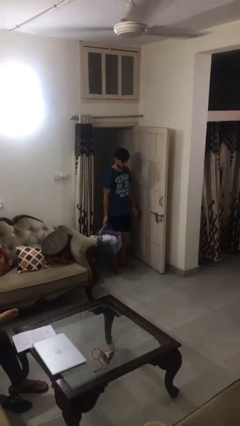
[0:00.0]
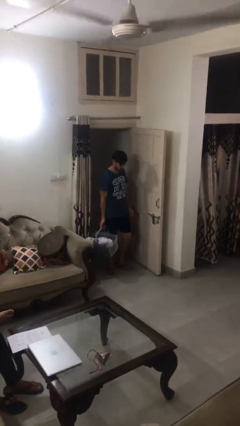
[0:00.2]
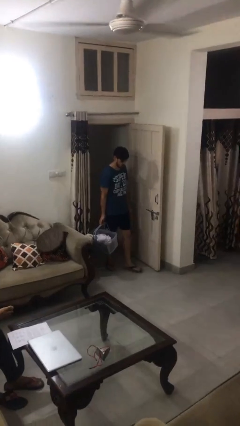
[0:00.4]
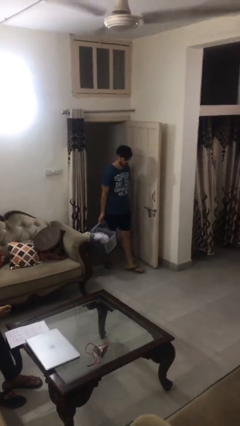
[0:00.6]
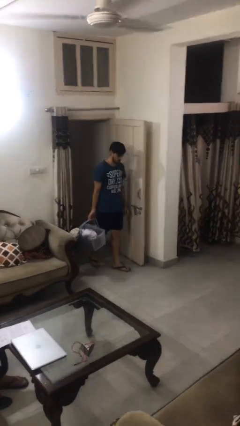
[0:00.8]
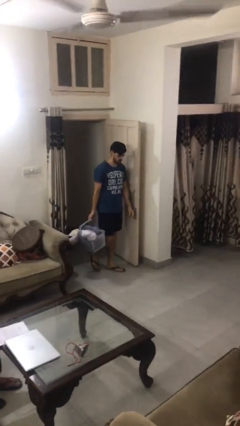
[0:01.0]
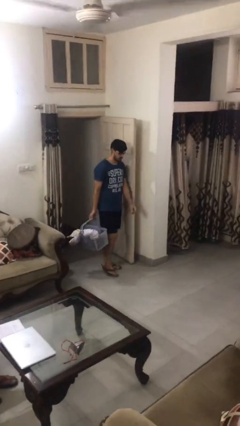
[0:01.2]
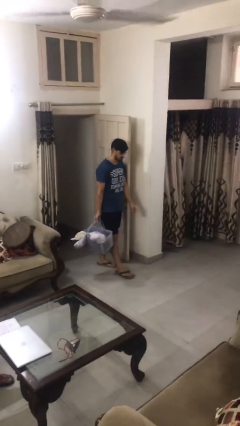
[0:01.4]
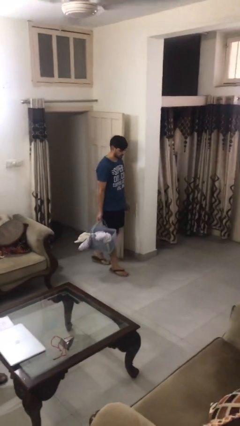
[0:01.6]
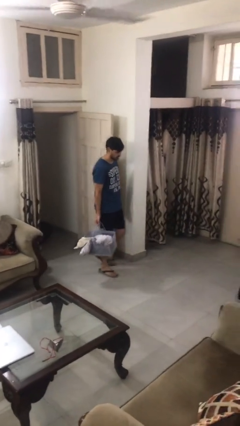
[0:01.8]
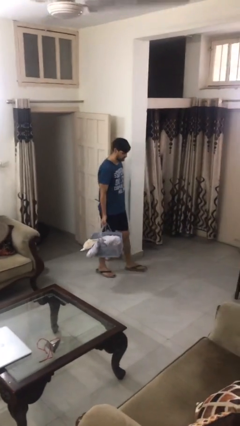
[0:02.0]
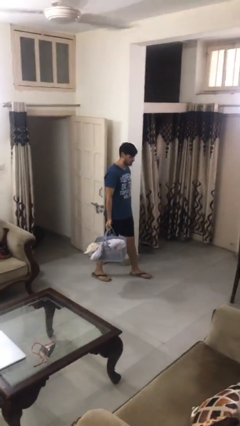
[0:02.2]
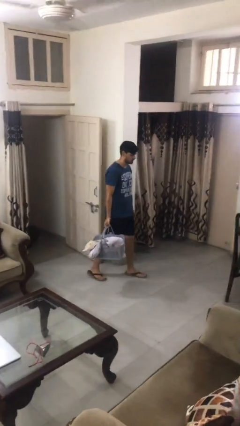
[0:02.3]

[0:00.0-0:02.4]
person carries laundry basket

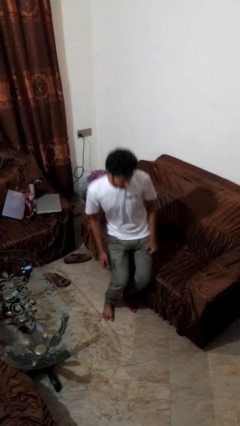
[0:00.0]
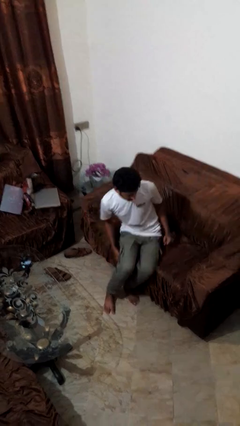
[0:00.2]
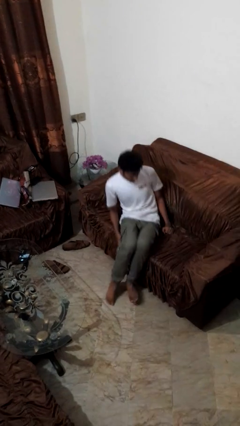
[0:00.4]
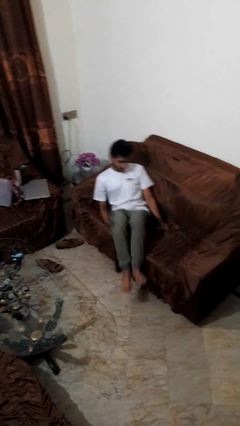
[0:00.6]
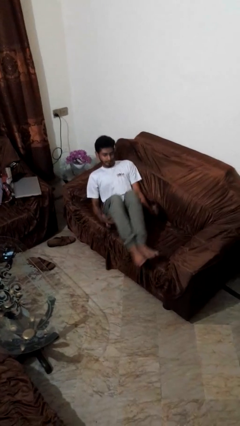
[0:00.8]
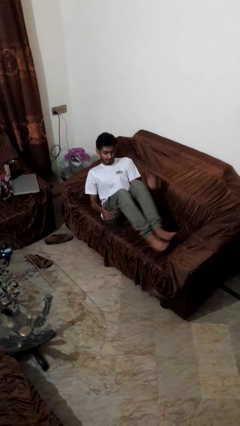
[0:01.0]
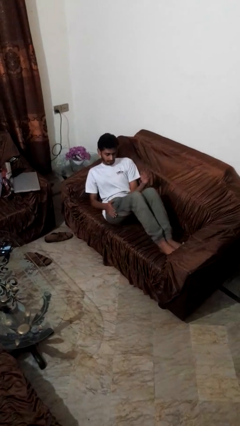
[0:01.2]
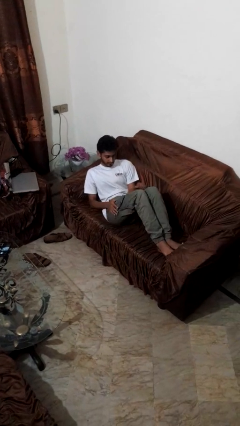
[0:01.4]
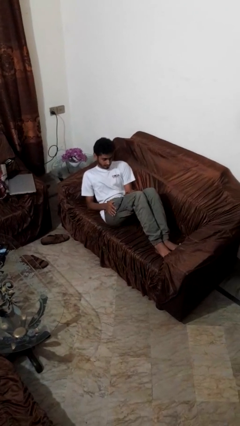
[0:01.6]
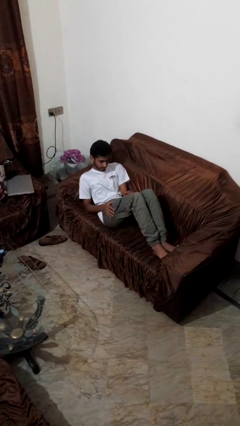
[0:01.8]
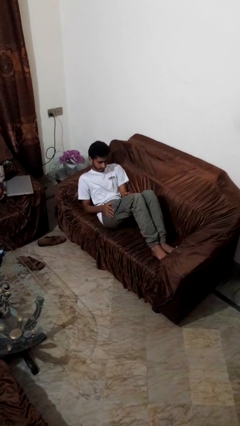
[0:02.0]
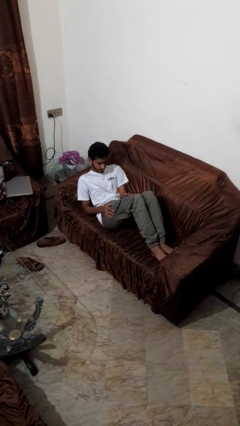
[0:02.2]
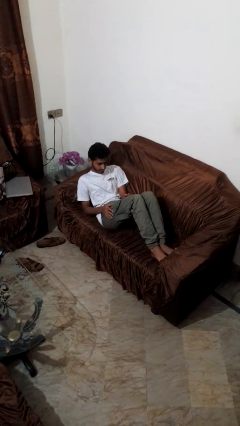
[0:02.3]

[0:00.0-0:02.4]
person lies down on couch

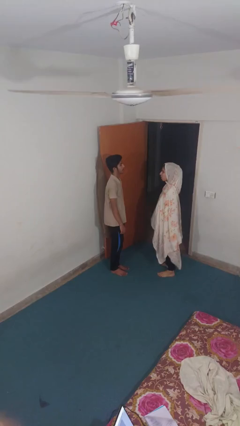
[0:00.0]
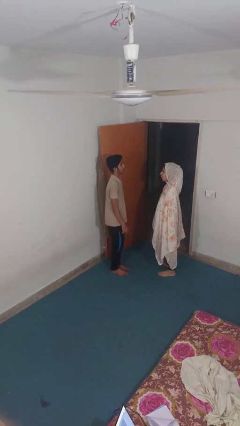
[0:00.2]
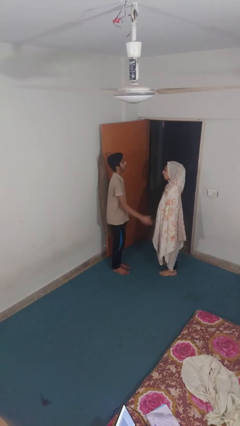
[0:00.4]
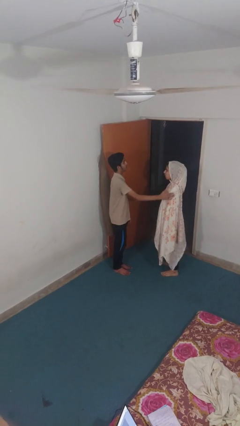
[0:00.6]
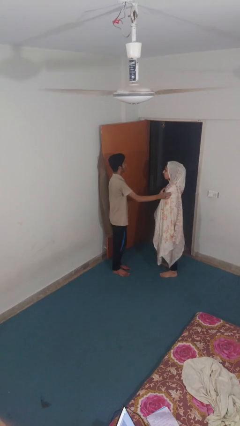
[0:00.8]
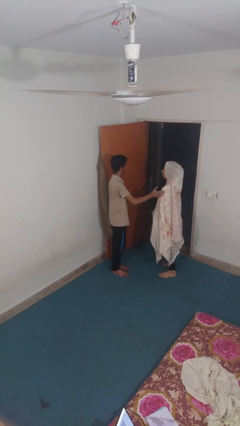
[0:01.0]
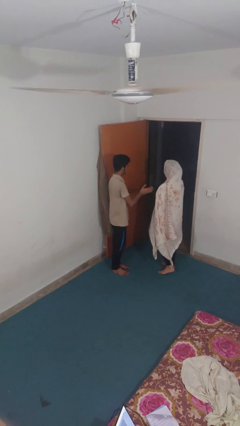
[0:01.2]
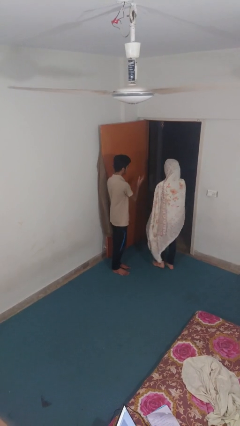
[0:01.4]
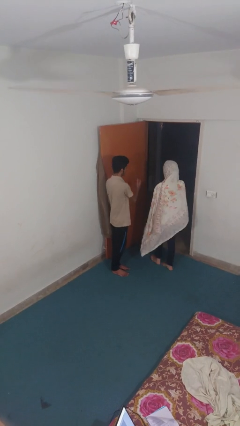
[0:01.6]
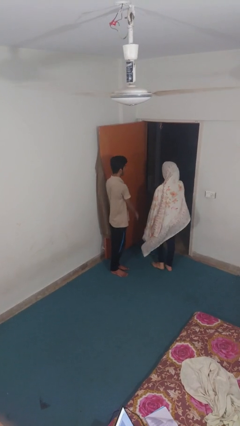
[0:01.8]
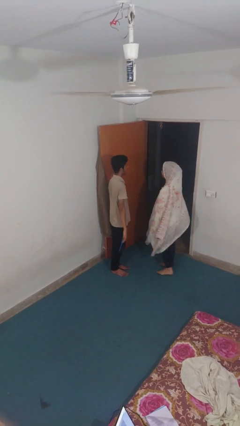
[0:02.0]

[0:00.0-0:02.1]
person shoves person

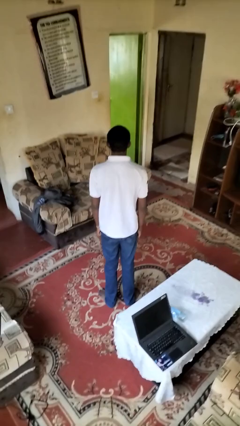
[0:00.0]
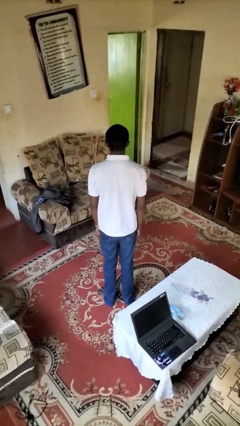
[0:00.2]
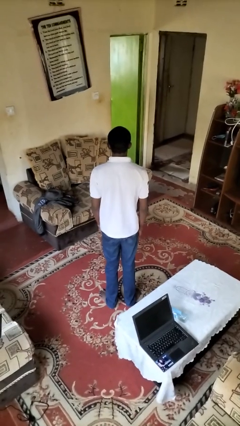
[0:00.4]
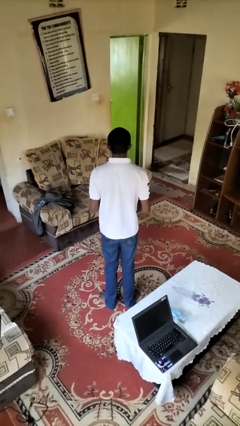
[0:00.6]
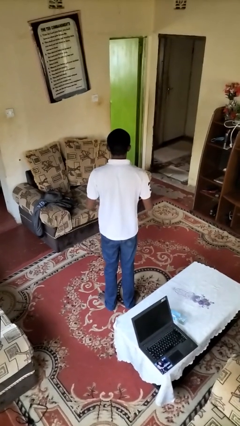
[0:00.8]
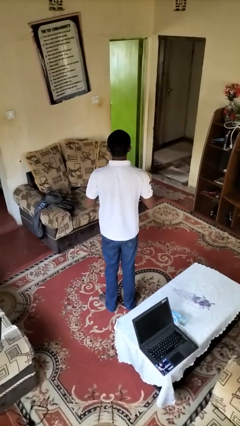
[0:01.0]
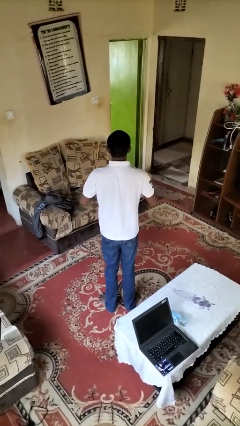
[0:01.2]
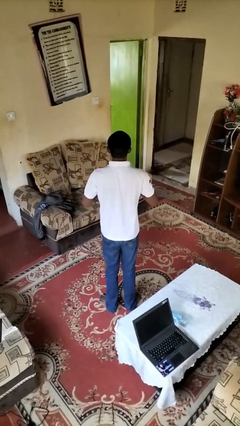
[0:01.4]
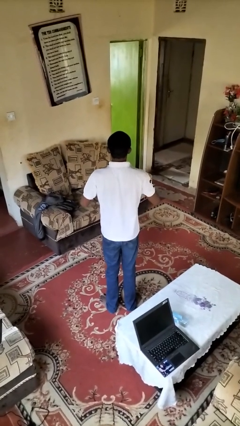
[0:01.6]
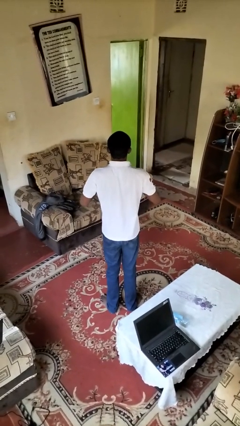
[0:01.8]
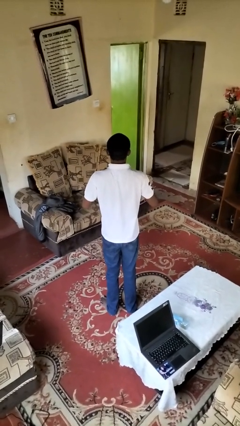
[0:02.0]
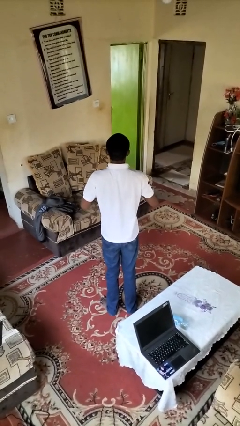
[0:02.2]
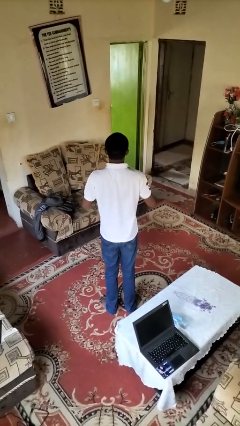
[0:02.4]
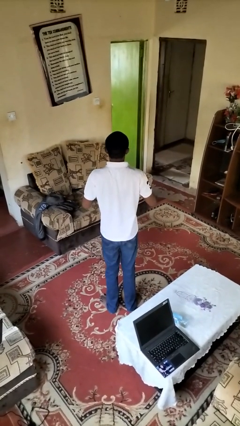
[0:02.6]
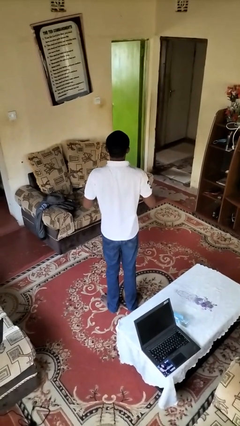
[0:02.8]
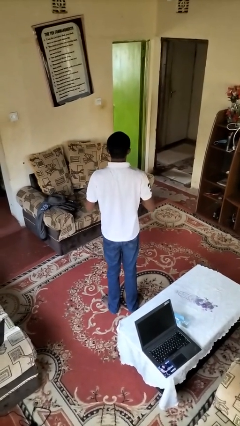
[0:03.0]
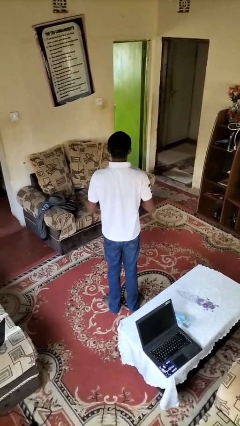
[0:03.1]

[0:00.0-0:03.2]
person drums on chest

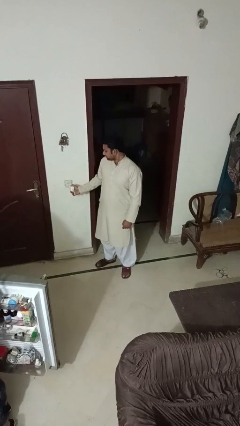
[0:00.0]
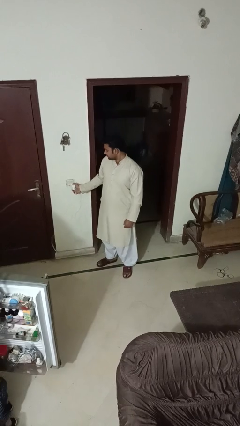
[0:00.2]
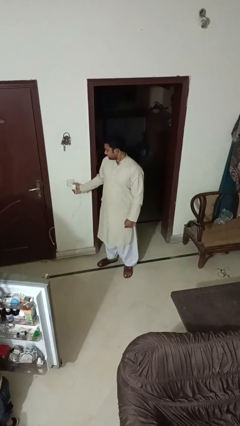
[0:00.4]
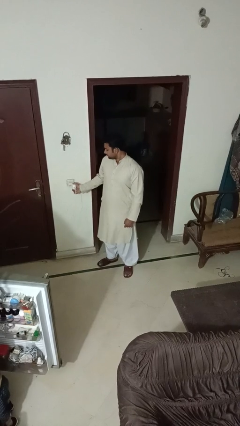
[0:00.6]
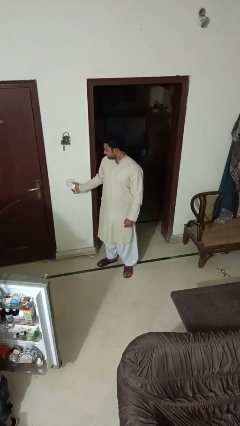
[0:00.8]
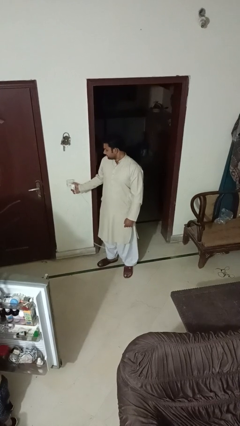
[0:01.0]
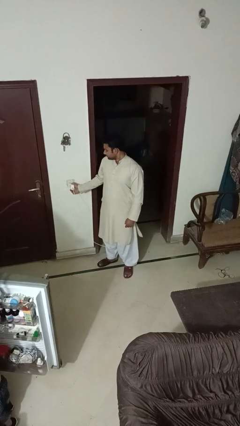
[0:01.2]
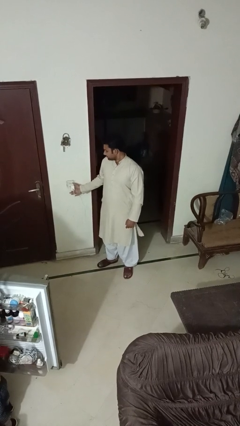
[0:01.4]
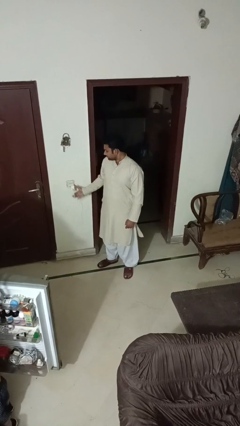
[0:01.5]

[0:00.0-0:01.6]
person plugs into electrical socket

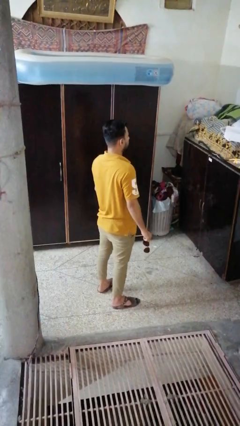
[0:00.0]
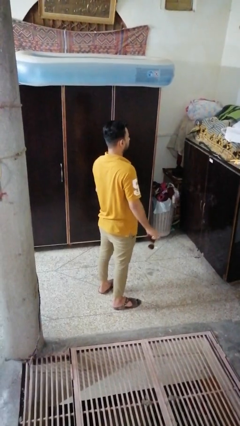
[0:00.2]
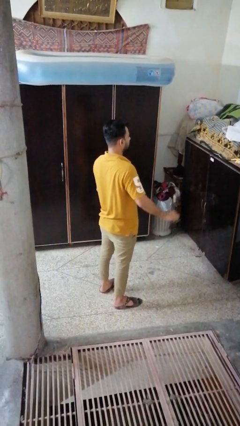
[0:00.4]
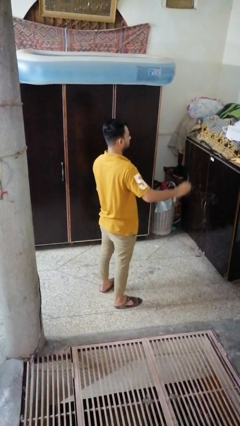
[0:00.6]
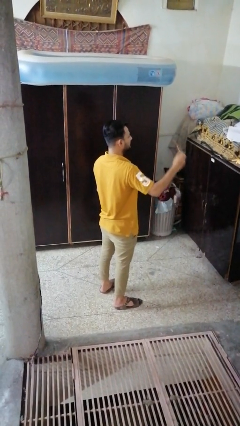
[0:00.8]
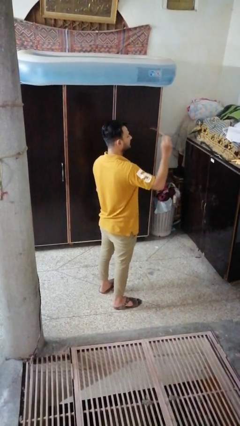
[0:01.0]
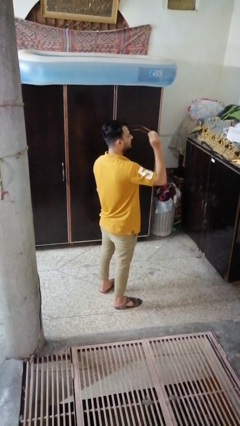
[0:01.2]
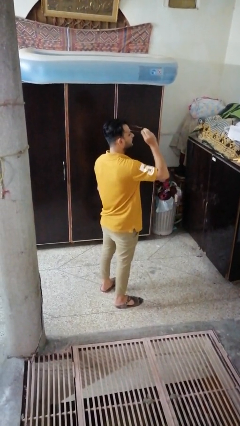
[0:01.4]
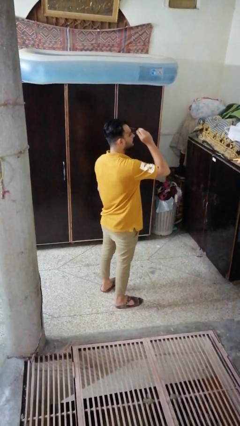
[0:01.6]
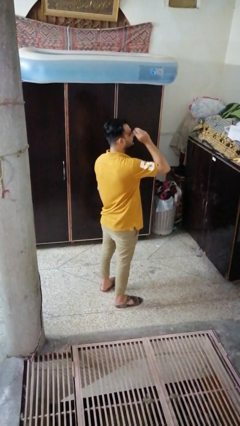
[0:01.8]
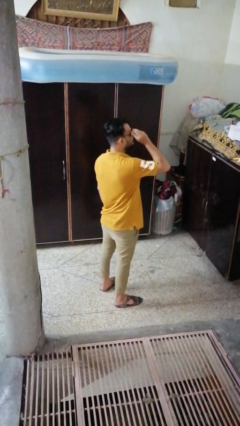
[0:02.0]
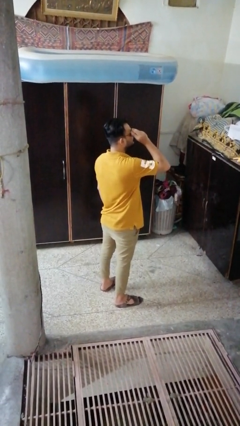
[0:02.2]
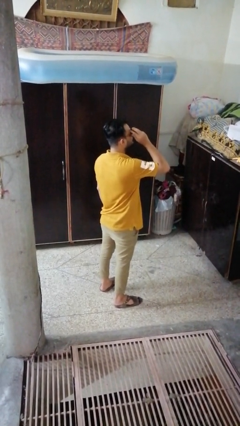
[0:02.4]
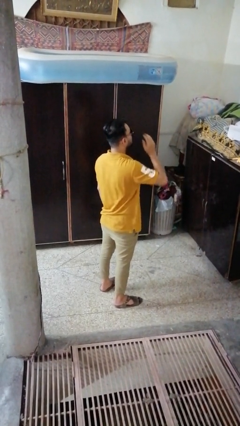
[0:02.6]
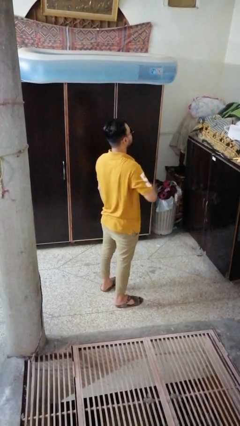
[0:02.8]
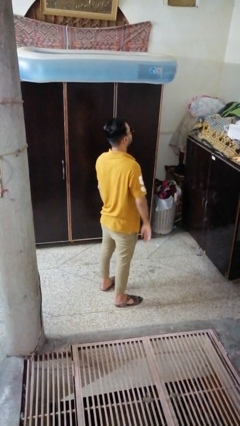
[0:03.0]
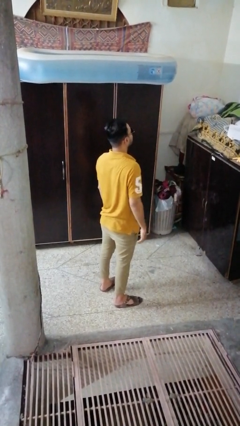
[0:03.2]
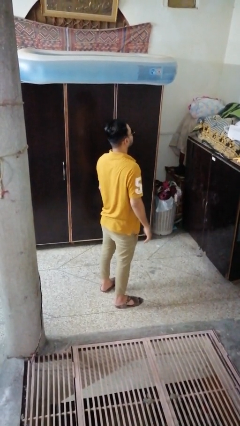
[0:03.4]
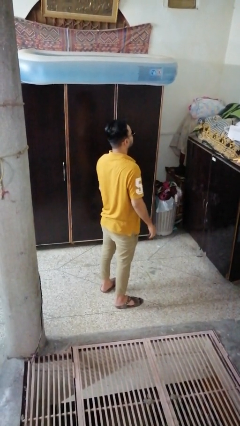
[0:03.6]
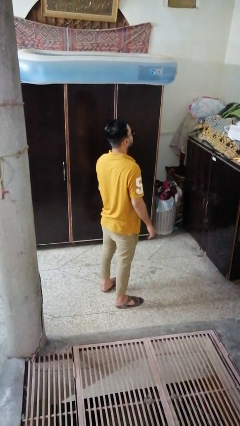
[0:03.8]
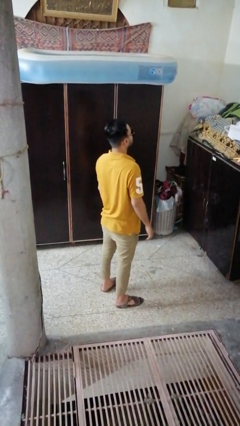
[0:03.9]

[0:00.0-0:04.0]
person puts on sunglasses

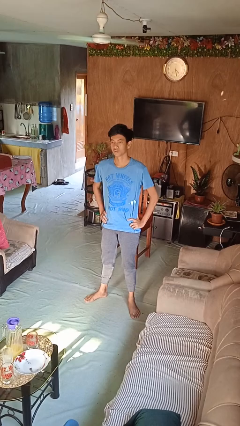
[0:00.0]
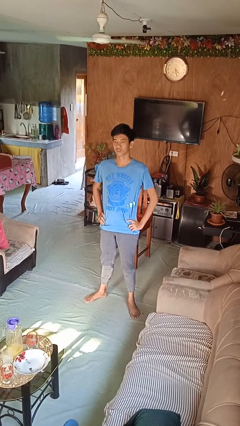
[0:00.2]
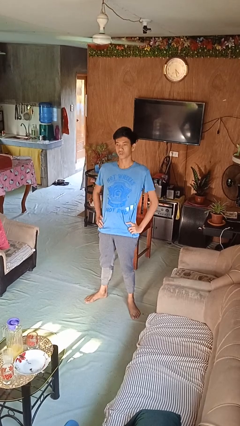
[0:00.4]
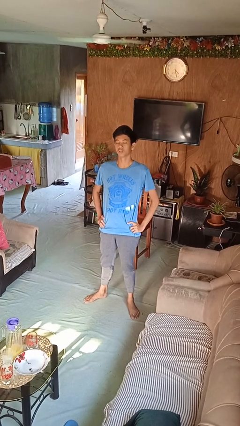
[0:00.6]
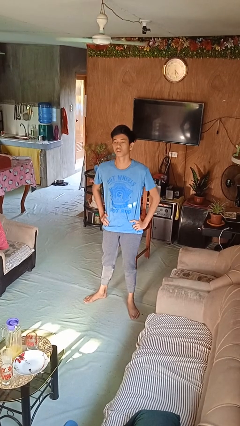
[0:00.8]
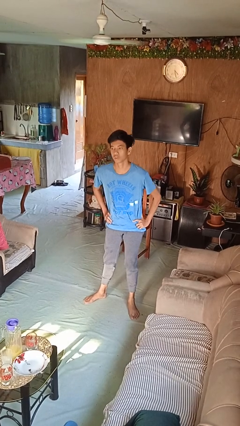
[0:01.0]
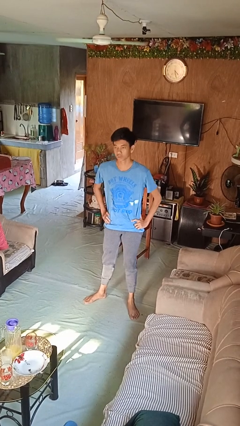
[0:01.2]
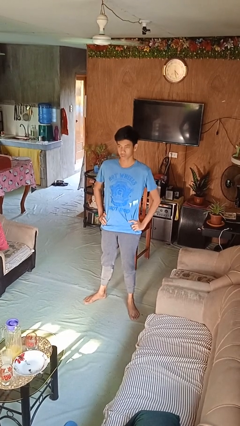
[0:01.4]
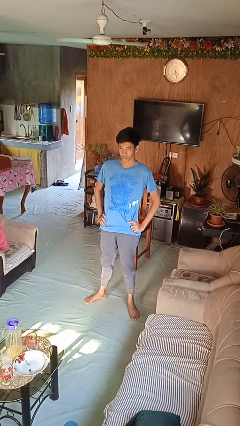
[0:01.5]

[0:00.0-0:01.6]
person wiggles hips

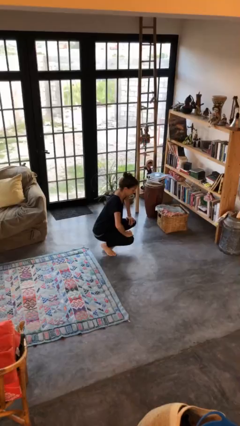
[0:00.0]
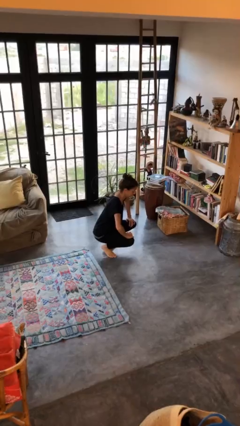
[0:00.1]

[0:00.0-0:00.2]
person stands up
